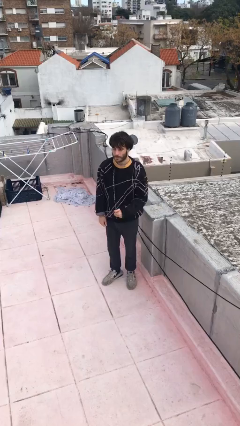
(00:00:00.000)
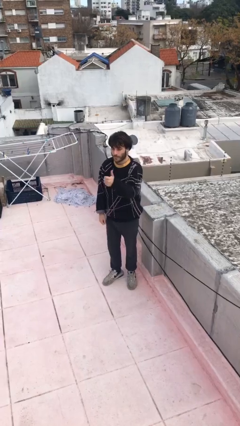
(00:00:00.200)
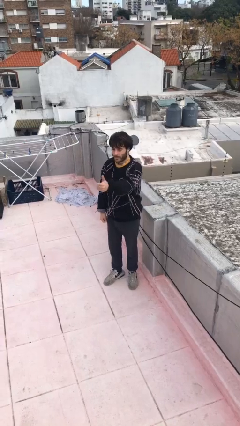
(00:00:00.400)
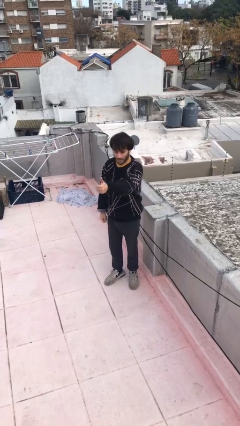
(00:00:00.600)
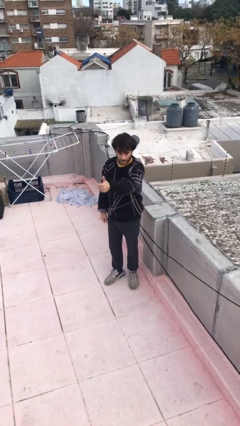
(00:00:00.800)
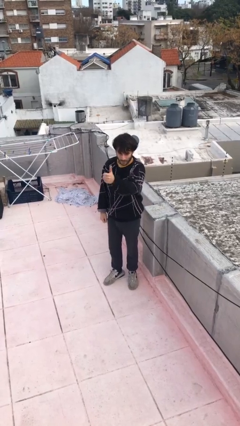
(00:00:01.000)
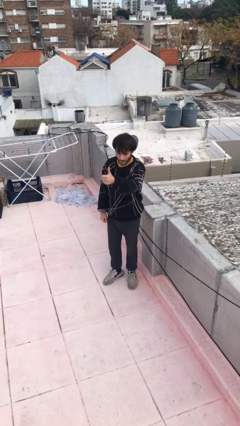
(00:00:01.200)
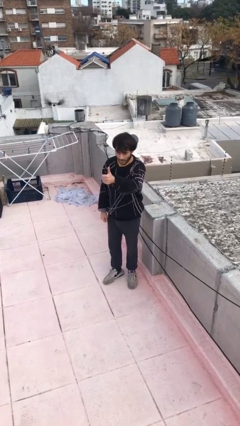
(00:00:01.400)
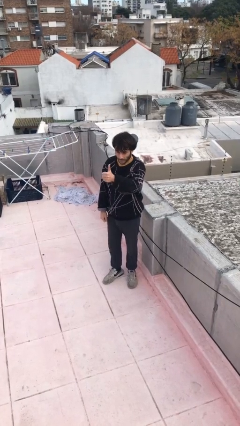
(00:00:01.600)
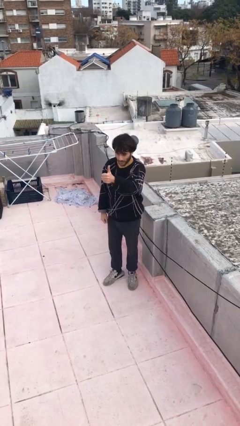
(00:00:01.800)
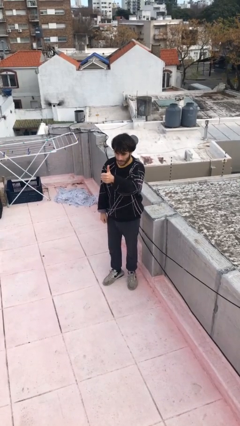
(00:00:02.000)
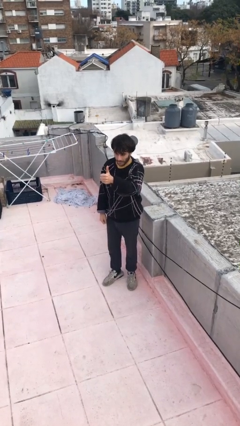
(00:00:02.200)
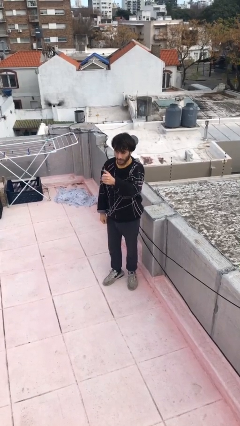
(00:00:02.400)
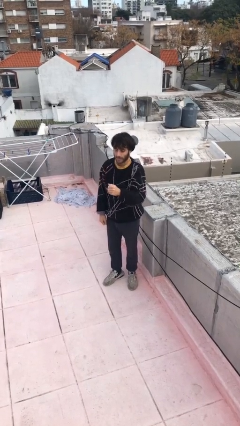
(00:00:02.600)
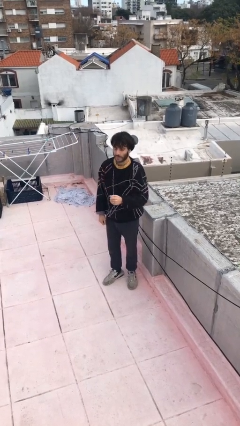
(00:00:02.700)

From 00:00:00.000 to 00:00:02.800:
person gestures thumbs up

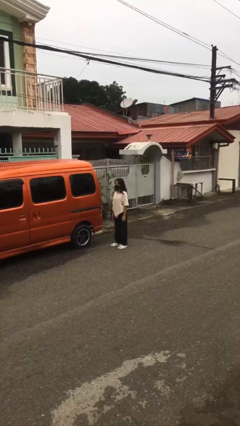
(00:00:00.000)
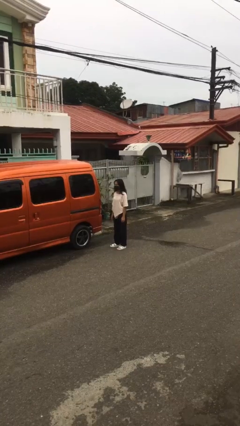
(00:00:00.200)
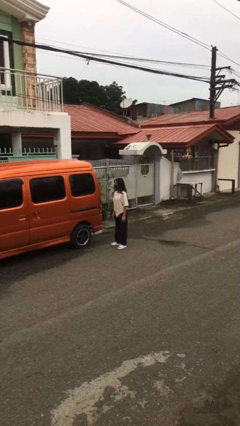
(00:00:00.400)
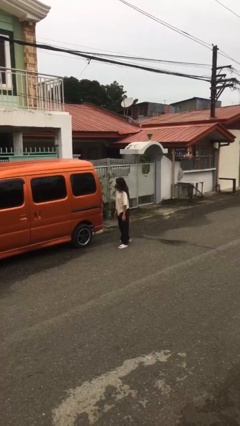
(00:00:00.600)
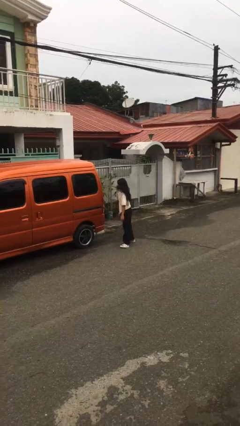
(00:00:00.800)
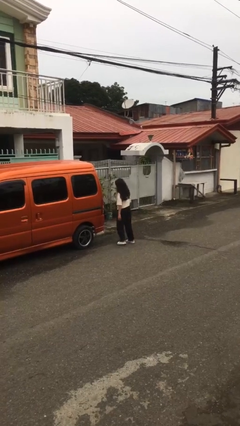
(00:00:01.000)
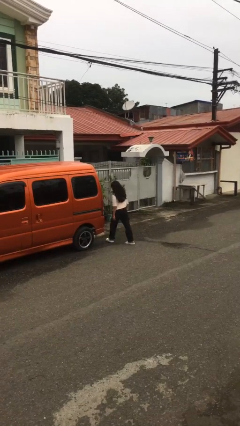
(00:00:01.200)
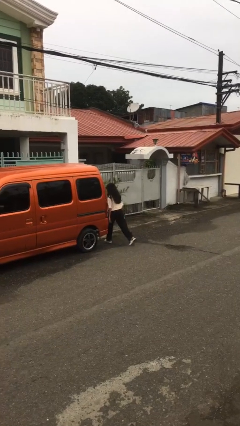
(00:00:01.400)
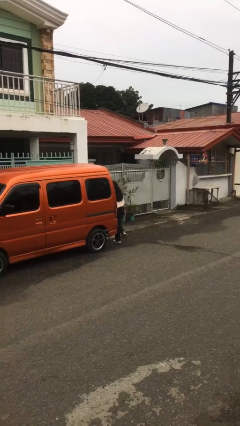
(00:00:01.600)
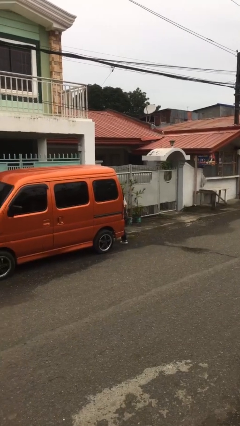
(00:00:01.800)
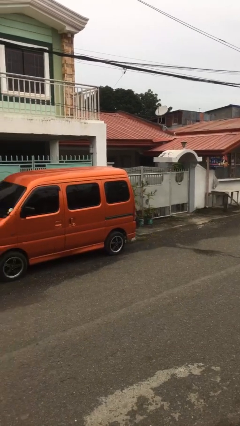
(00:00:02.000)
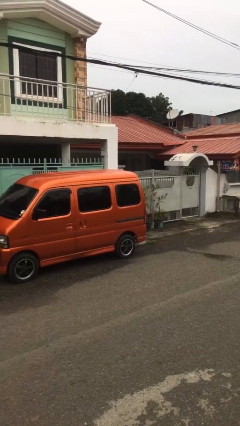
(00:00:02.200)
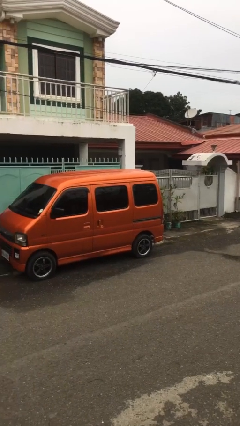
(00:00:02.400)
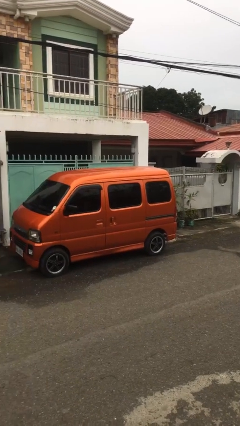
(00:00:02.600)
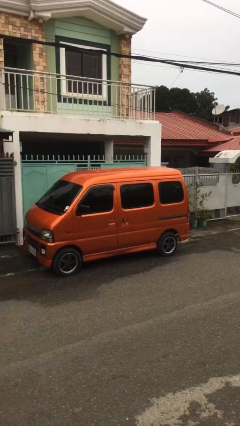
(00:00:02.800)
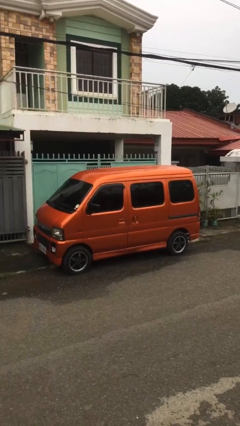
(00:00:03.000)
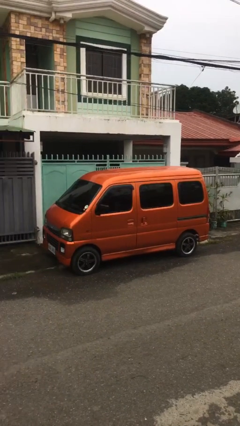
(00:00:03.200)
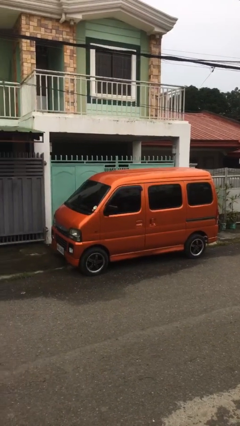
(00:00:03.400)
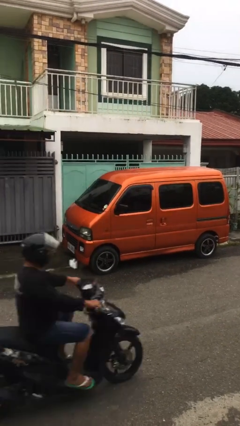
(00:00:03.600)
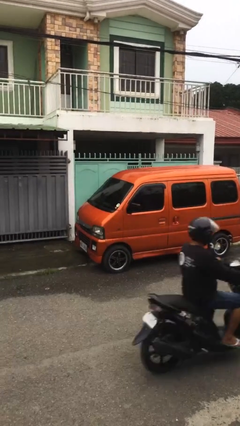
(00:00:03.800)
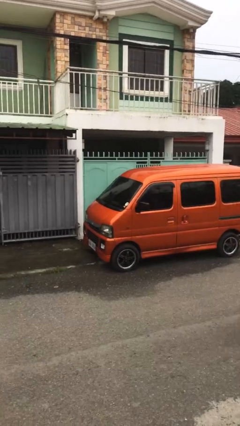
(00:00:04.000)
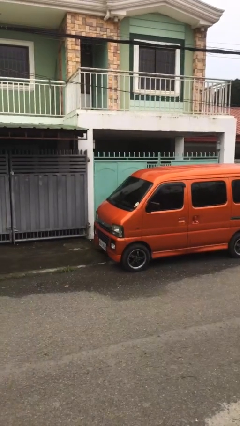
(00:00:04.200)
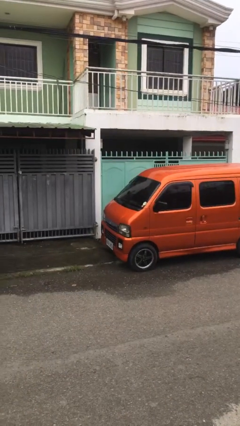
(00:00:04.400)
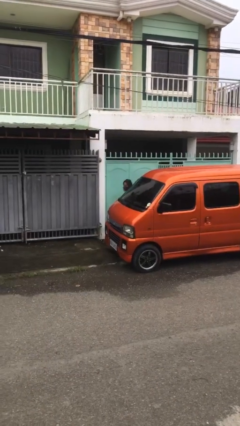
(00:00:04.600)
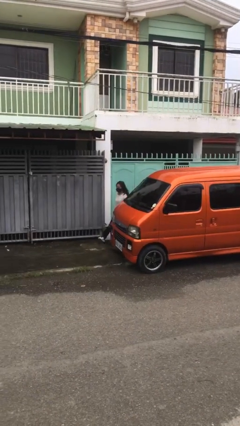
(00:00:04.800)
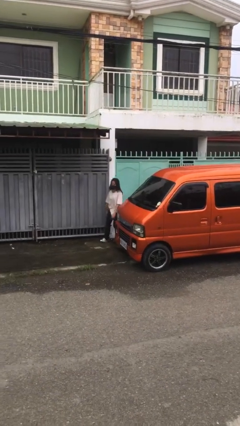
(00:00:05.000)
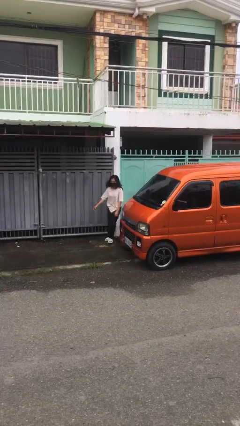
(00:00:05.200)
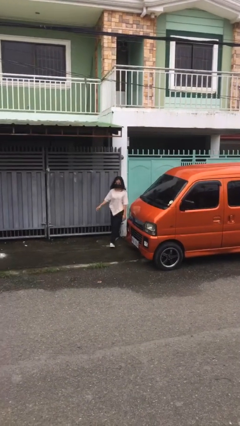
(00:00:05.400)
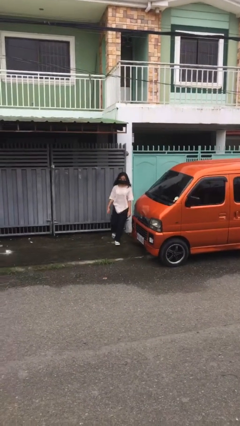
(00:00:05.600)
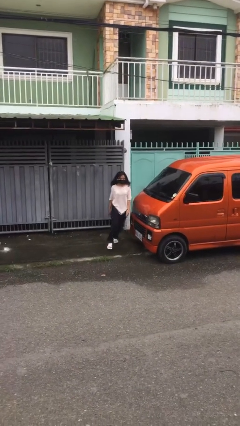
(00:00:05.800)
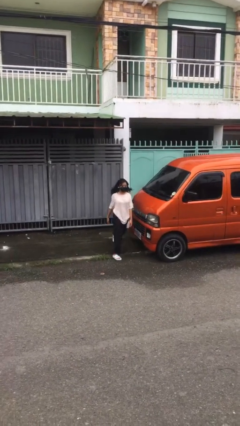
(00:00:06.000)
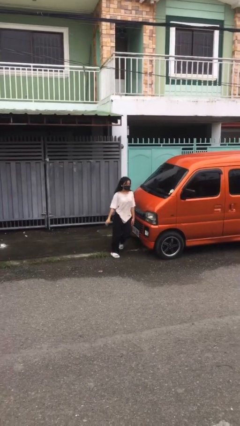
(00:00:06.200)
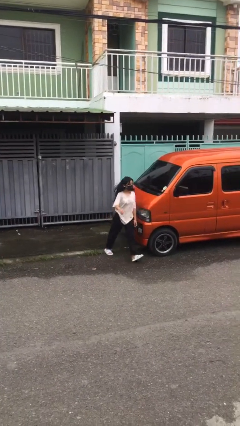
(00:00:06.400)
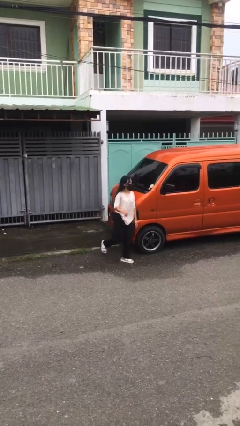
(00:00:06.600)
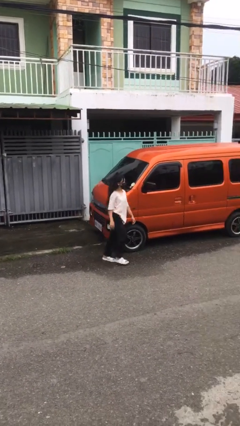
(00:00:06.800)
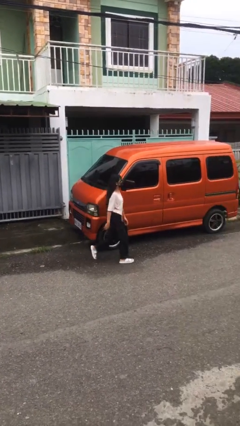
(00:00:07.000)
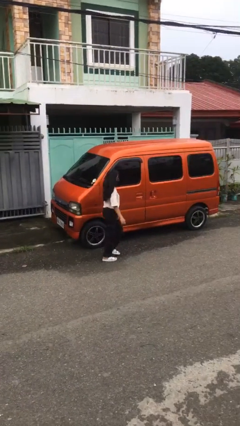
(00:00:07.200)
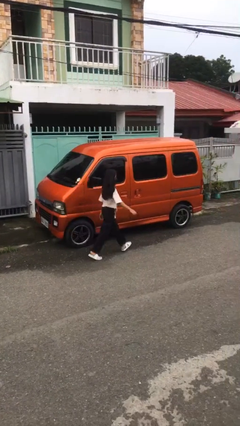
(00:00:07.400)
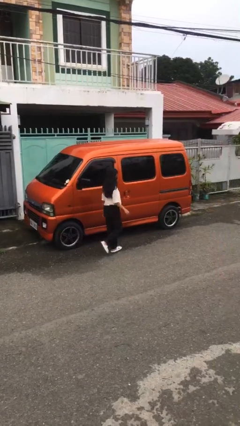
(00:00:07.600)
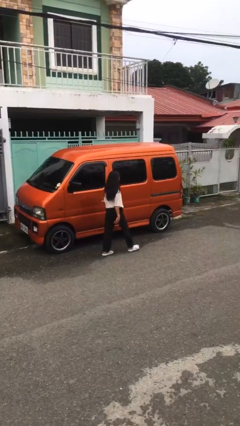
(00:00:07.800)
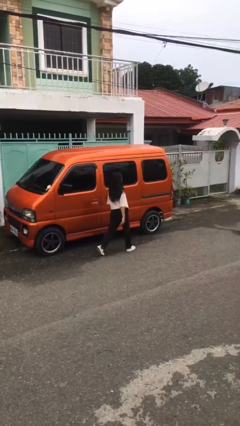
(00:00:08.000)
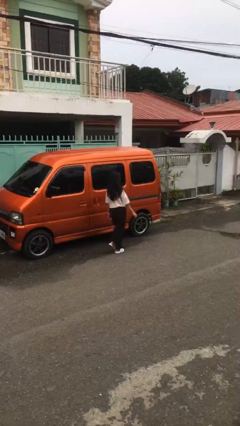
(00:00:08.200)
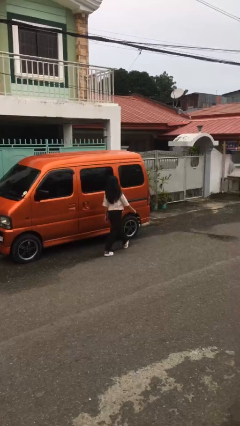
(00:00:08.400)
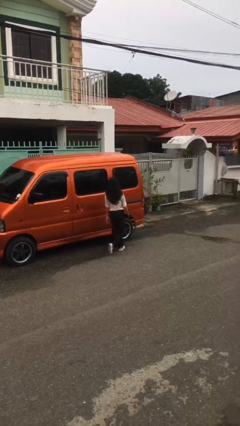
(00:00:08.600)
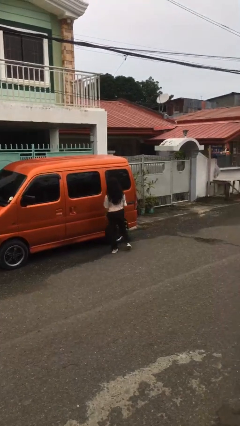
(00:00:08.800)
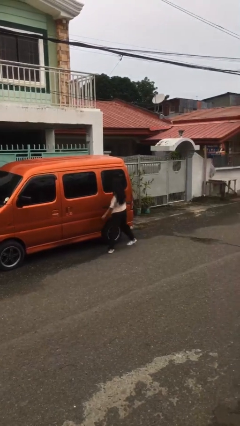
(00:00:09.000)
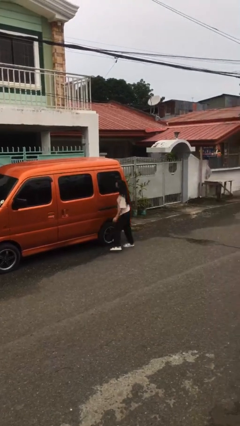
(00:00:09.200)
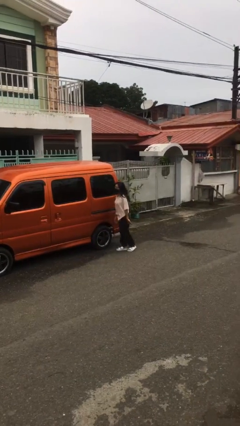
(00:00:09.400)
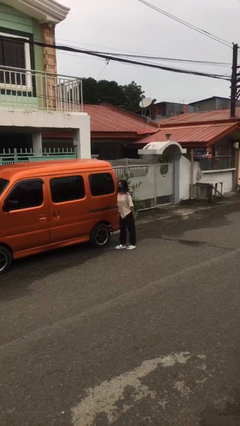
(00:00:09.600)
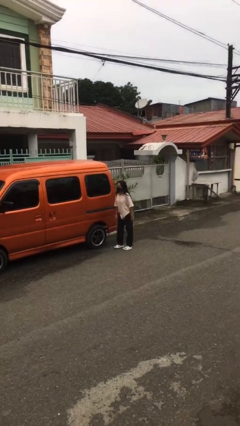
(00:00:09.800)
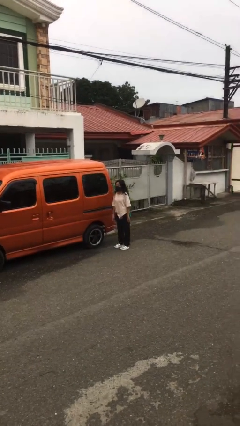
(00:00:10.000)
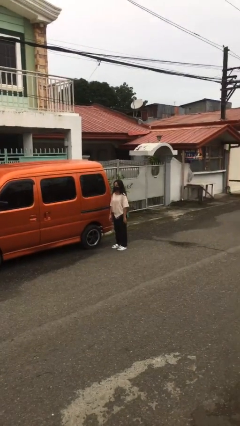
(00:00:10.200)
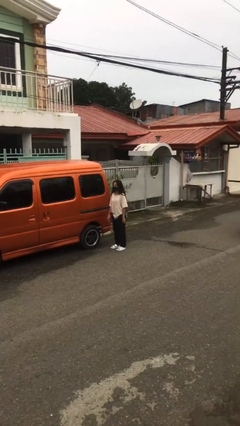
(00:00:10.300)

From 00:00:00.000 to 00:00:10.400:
person walks around car

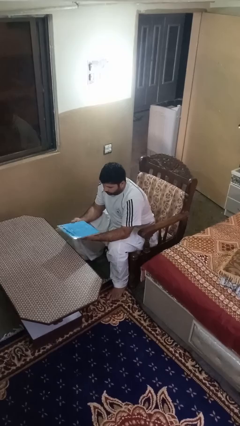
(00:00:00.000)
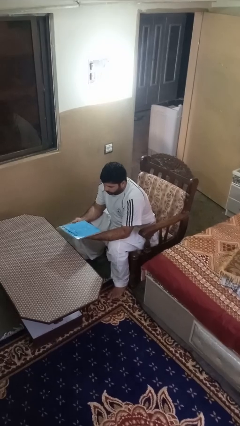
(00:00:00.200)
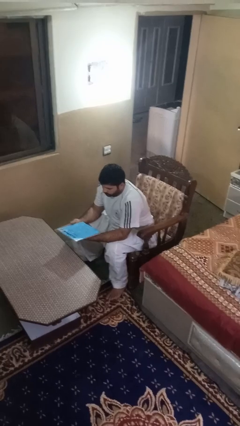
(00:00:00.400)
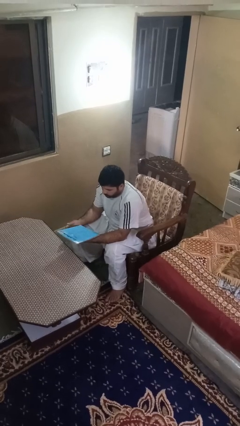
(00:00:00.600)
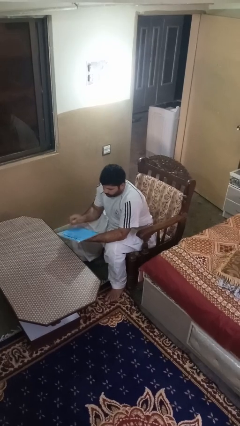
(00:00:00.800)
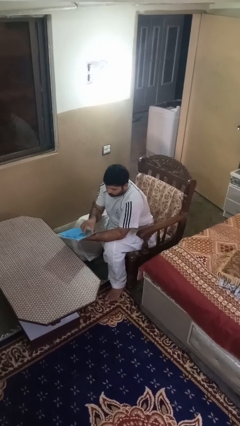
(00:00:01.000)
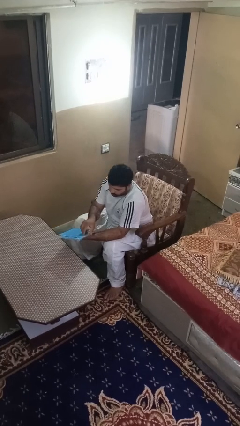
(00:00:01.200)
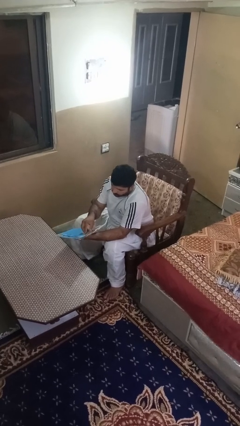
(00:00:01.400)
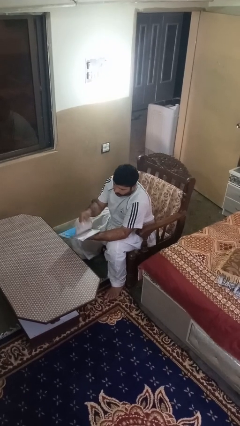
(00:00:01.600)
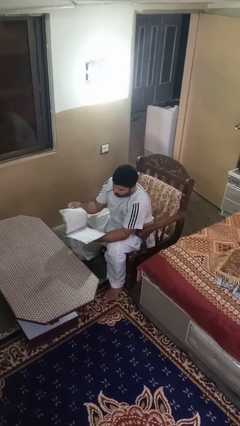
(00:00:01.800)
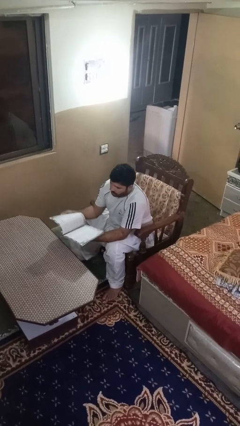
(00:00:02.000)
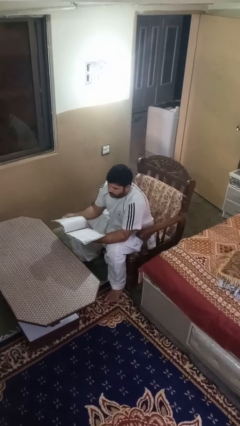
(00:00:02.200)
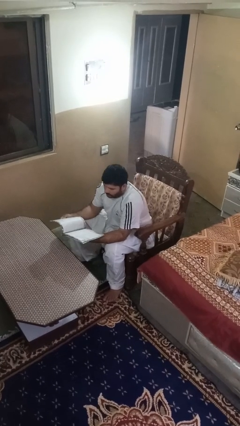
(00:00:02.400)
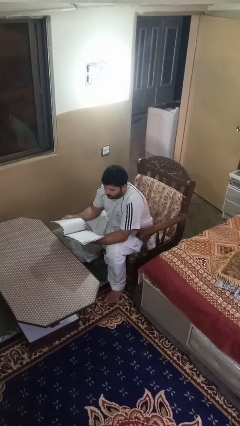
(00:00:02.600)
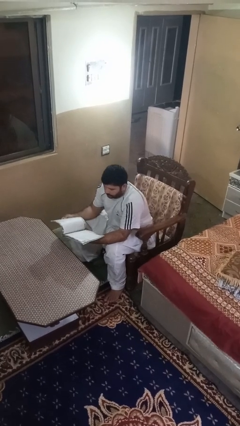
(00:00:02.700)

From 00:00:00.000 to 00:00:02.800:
person reads magazine

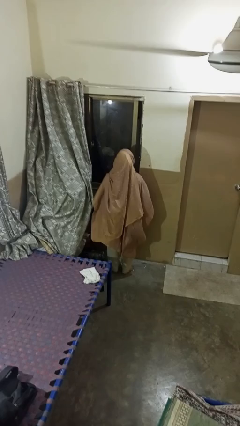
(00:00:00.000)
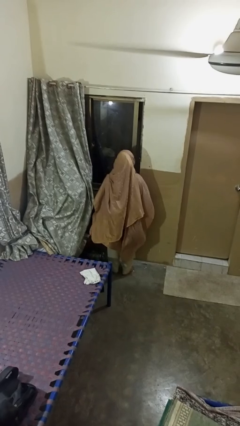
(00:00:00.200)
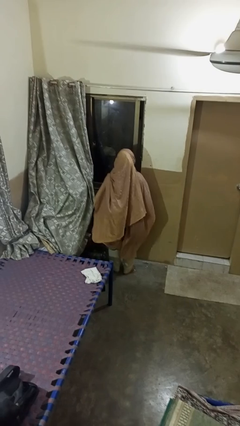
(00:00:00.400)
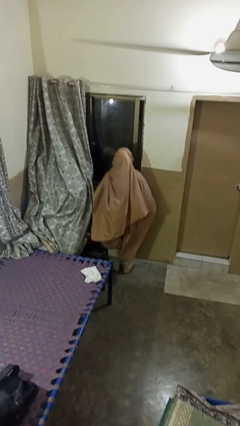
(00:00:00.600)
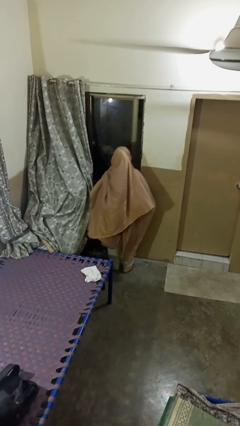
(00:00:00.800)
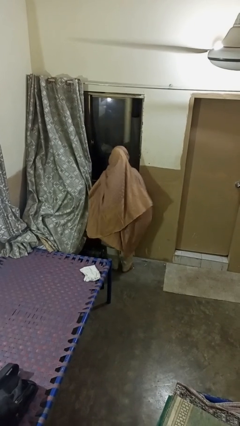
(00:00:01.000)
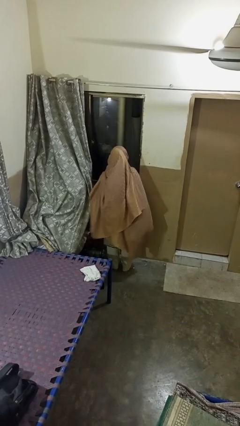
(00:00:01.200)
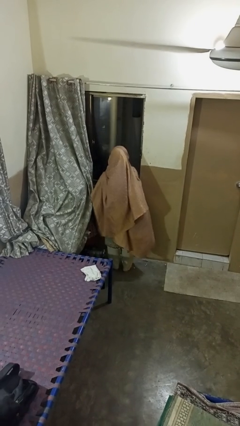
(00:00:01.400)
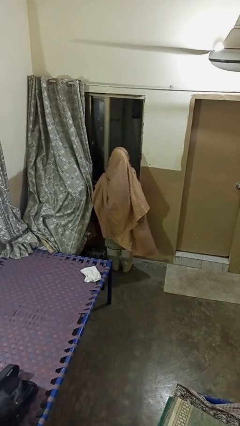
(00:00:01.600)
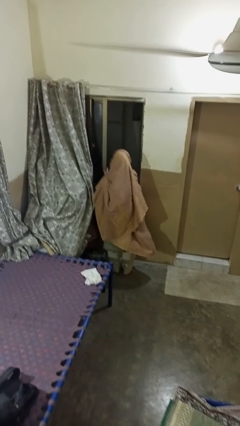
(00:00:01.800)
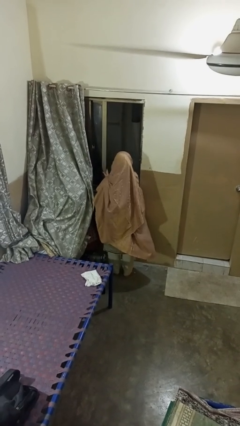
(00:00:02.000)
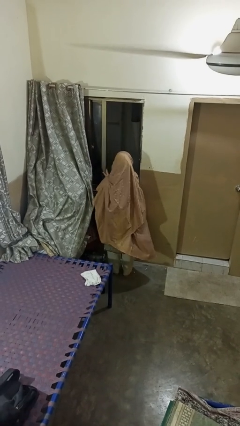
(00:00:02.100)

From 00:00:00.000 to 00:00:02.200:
person opens home window
